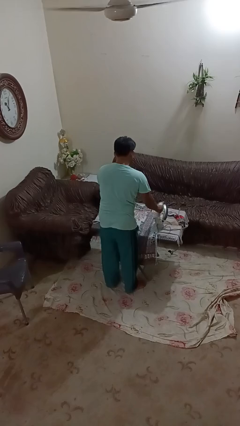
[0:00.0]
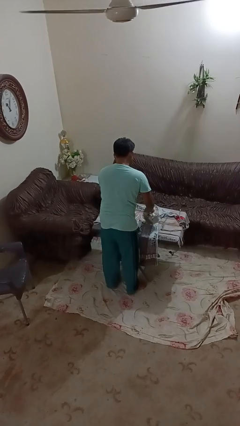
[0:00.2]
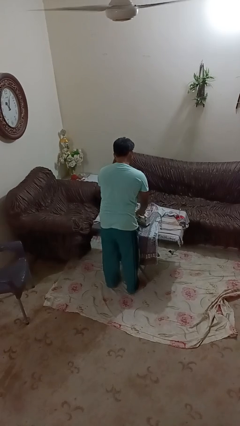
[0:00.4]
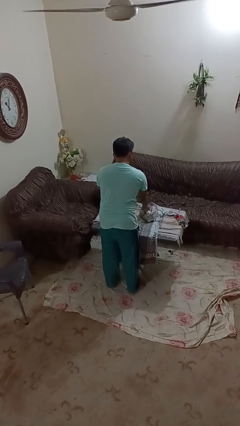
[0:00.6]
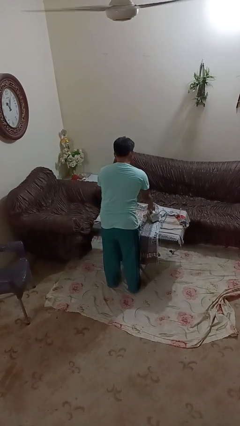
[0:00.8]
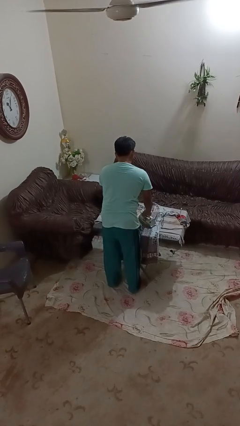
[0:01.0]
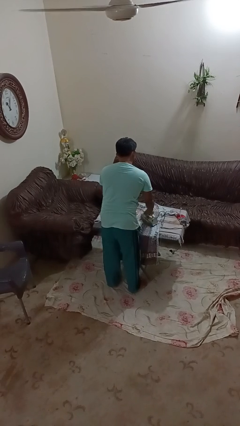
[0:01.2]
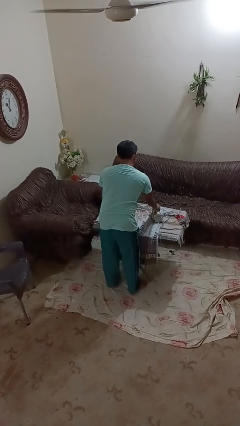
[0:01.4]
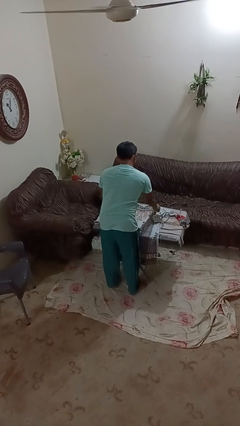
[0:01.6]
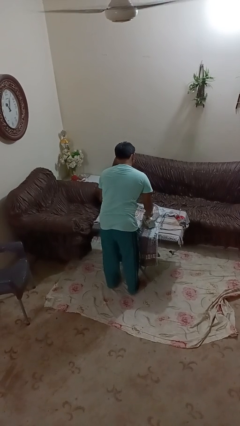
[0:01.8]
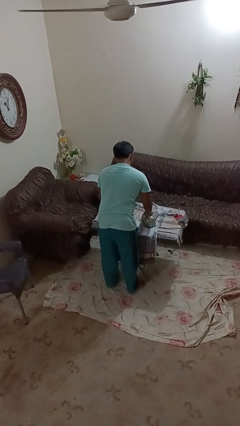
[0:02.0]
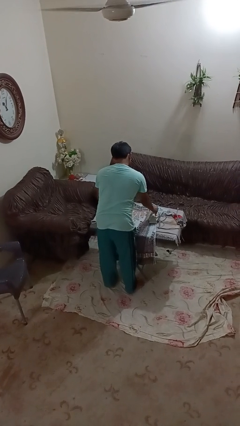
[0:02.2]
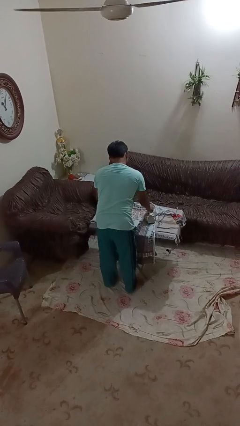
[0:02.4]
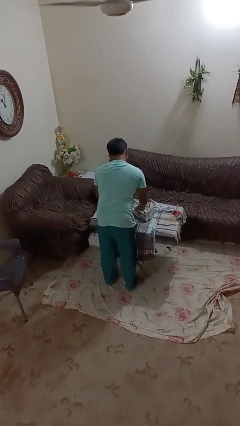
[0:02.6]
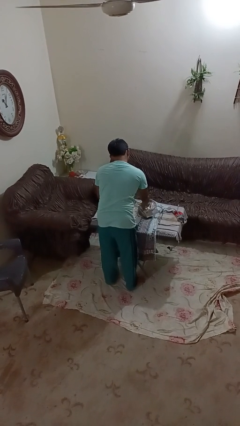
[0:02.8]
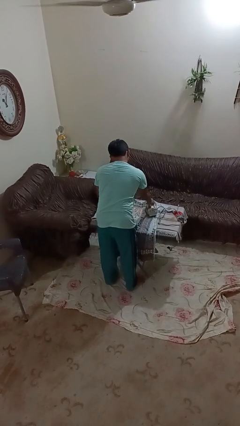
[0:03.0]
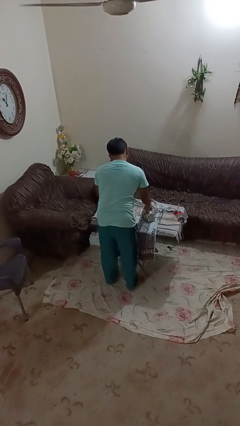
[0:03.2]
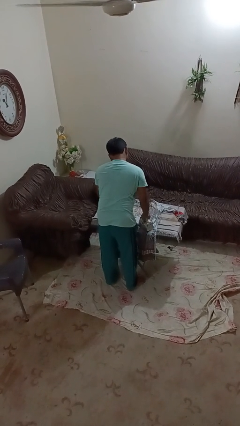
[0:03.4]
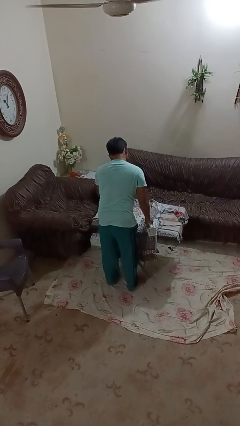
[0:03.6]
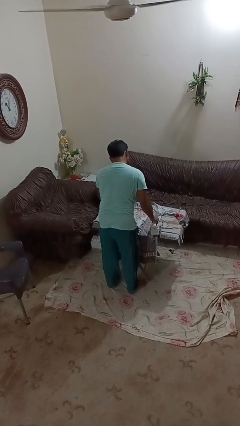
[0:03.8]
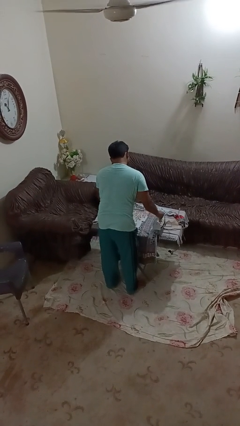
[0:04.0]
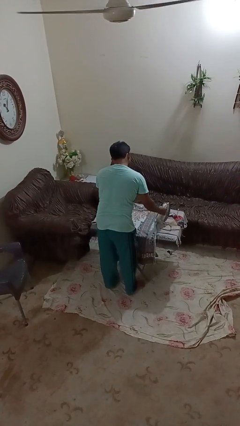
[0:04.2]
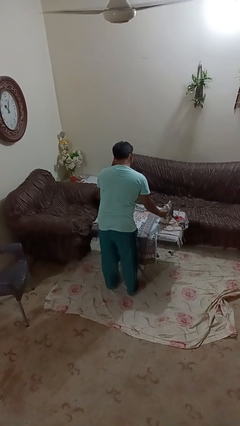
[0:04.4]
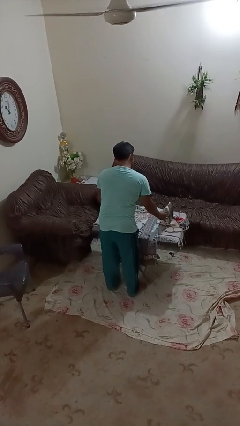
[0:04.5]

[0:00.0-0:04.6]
person irons clothes

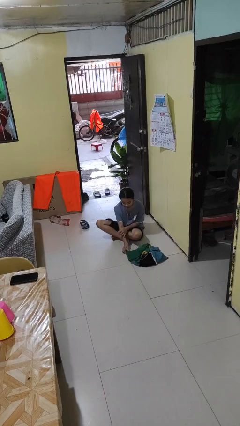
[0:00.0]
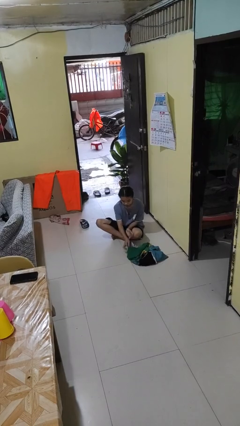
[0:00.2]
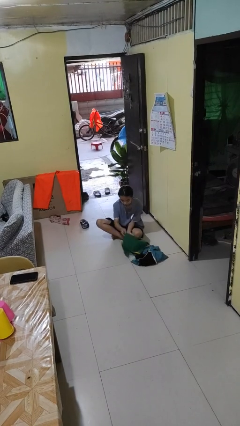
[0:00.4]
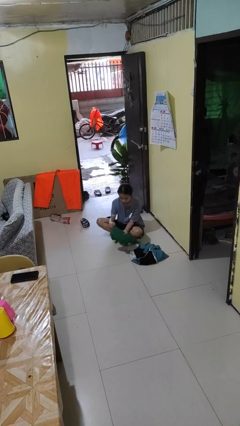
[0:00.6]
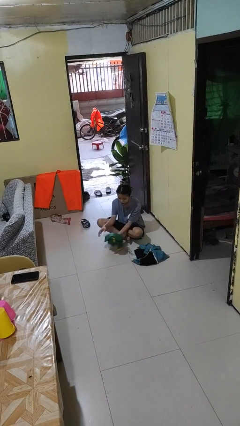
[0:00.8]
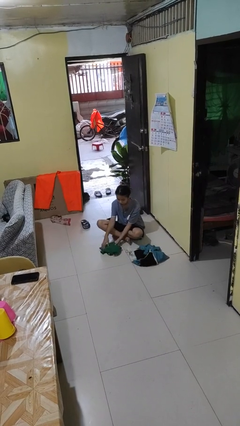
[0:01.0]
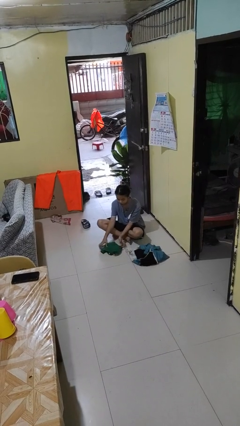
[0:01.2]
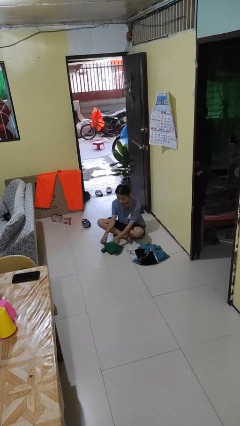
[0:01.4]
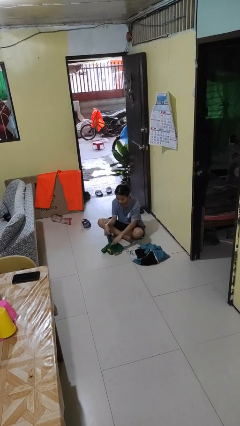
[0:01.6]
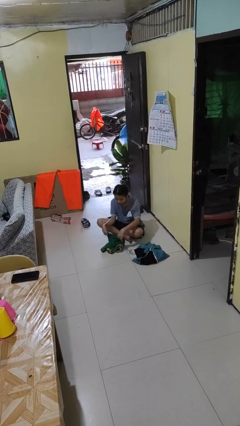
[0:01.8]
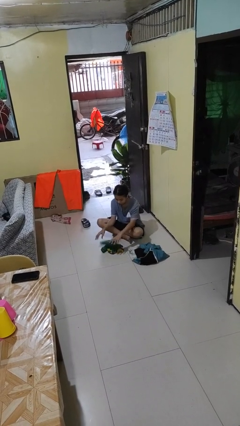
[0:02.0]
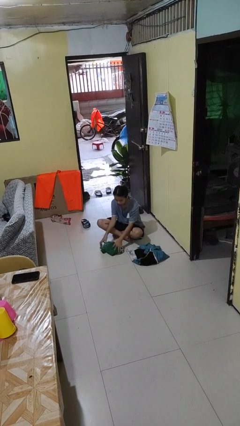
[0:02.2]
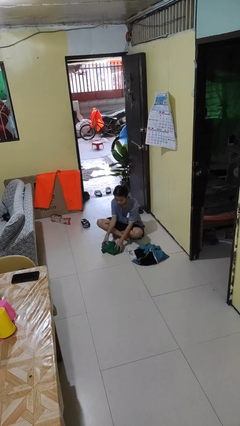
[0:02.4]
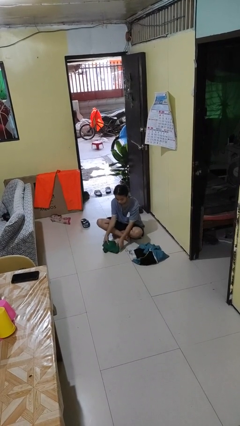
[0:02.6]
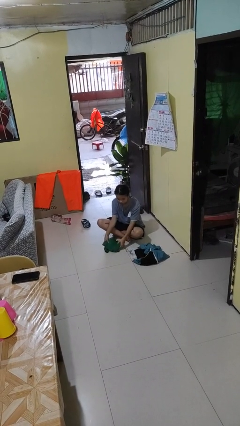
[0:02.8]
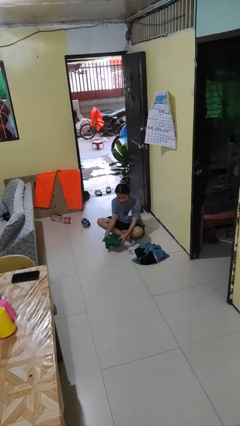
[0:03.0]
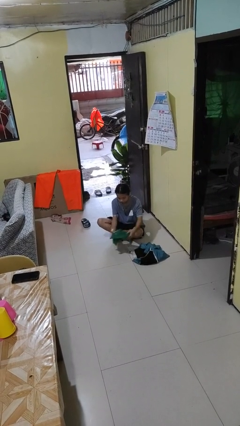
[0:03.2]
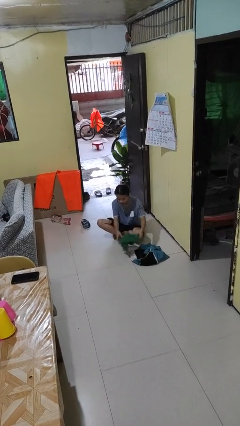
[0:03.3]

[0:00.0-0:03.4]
person folds shirt

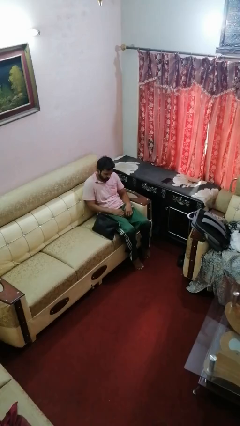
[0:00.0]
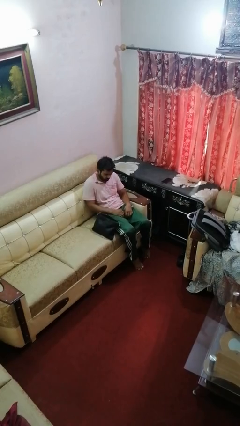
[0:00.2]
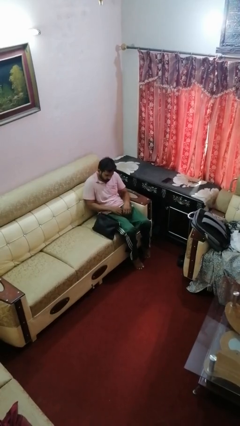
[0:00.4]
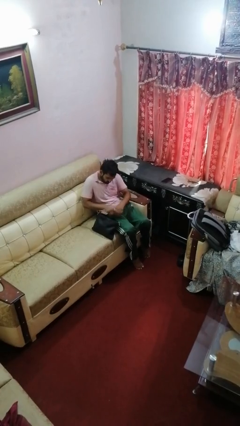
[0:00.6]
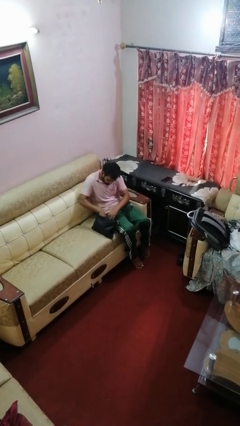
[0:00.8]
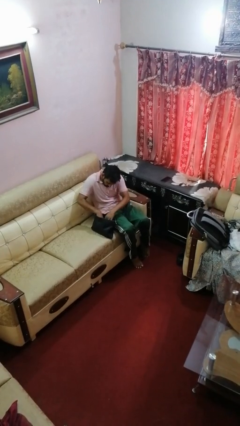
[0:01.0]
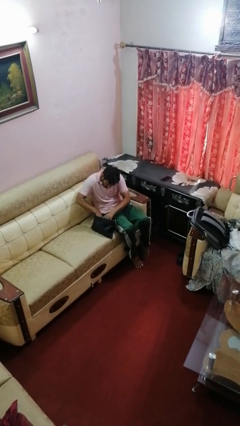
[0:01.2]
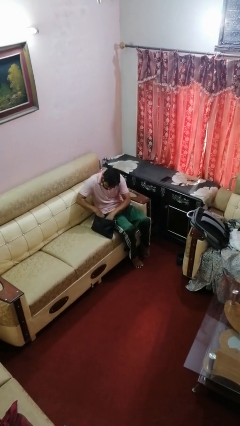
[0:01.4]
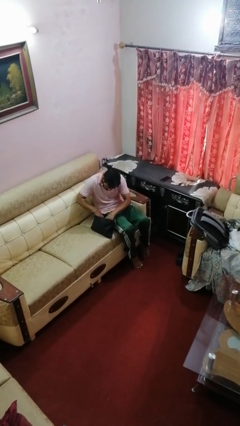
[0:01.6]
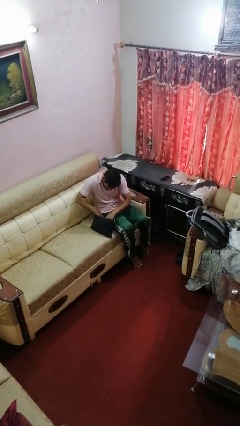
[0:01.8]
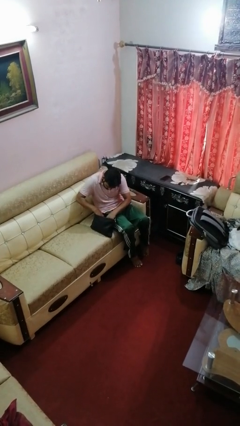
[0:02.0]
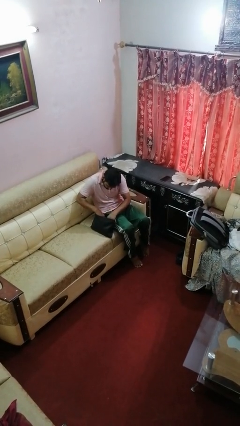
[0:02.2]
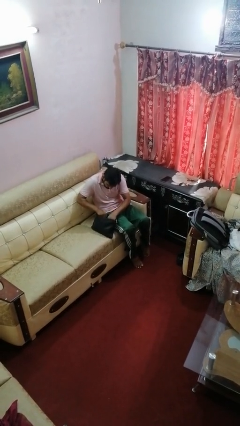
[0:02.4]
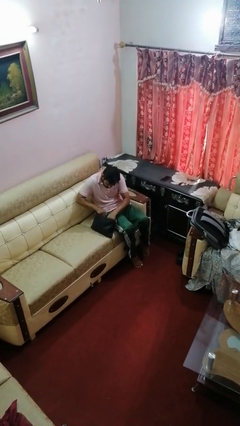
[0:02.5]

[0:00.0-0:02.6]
person searches in purse

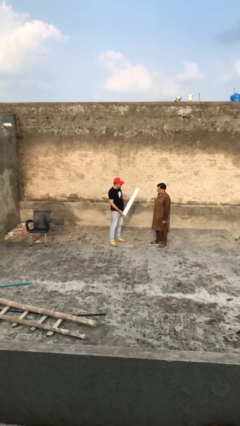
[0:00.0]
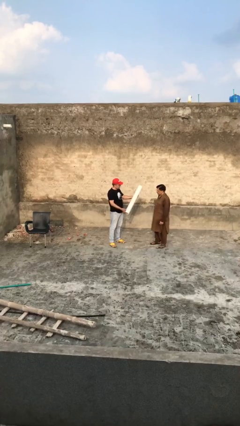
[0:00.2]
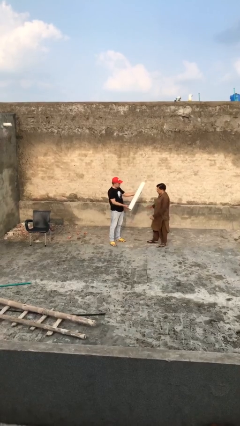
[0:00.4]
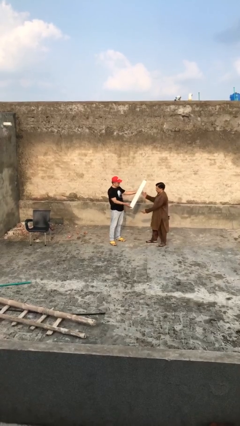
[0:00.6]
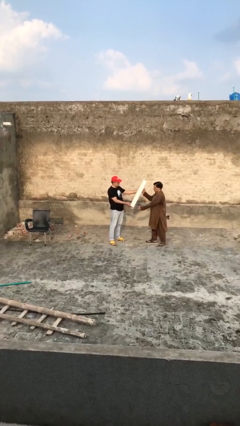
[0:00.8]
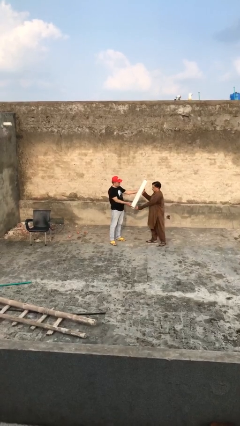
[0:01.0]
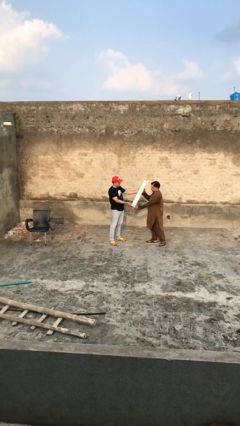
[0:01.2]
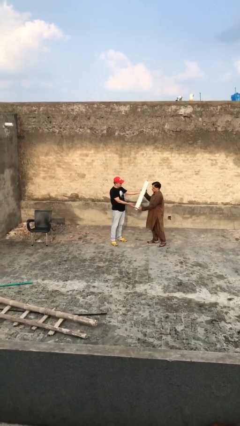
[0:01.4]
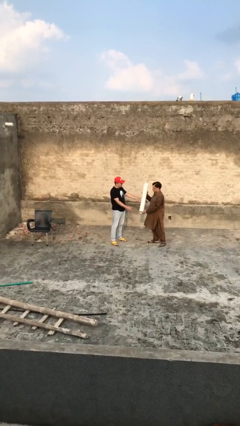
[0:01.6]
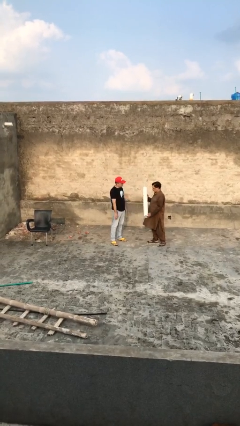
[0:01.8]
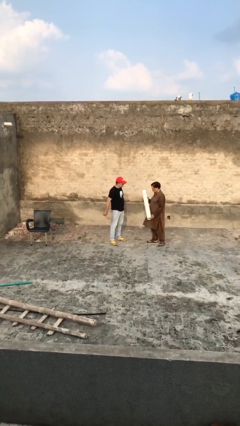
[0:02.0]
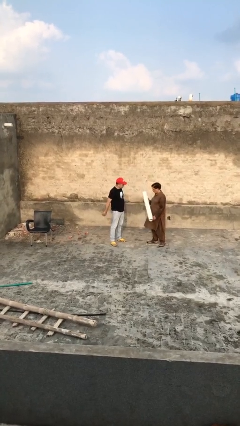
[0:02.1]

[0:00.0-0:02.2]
person transfers object to person

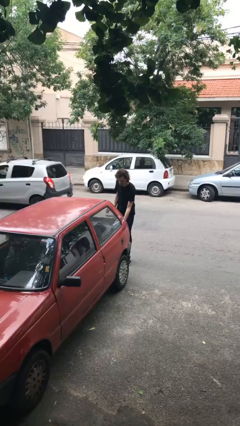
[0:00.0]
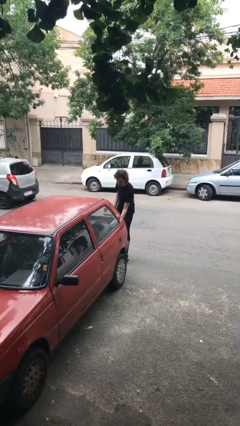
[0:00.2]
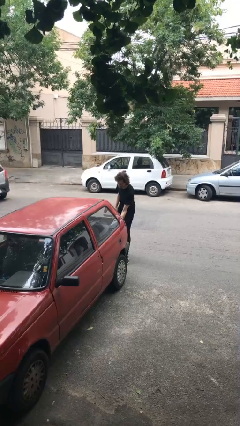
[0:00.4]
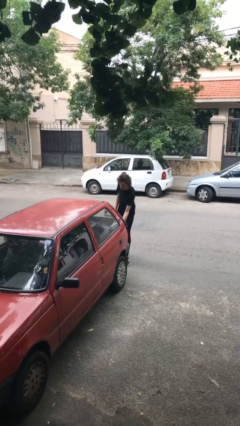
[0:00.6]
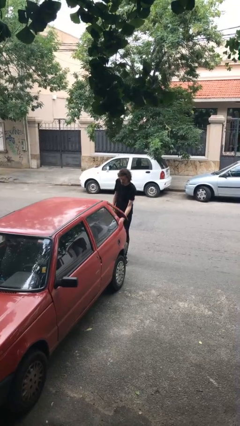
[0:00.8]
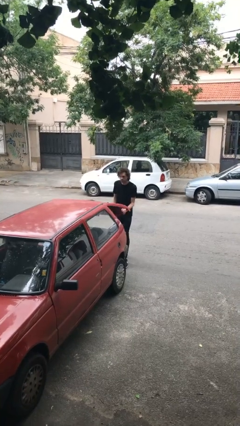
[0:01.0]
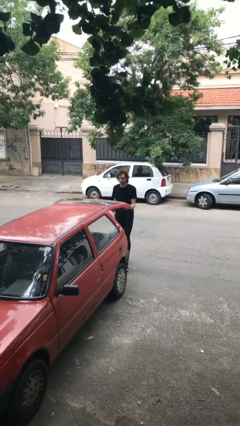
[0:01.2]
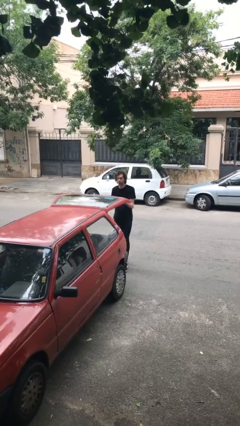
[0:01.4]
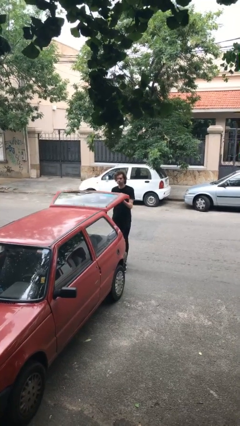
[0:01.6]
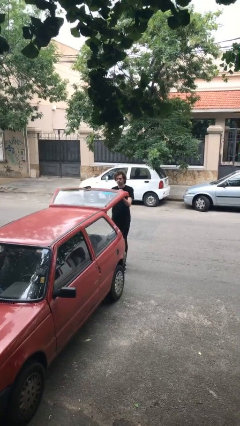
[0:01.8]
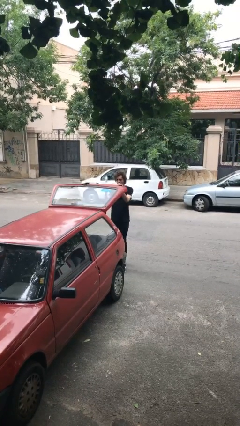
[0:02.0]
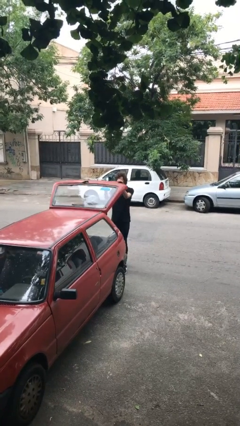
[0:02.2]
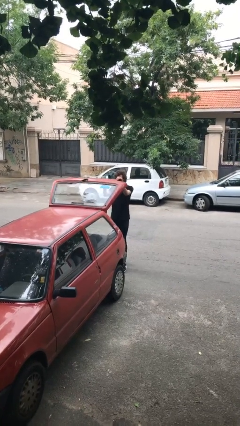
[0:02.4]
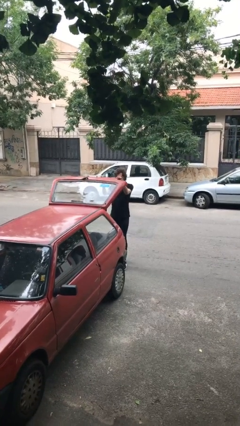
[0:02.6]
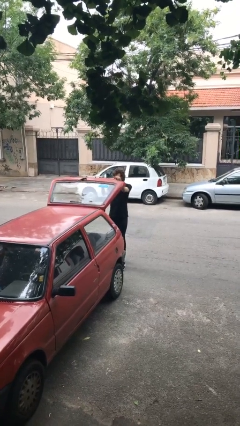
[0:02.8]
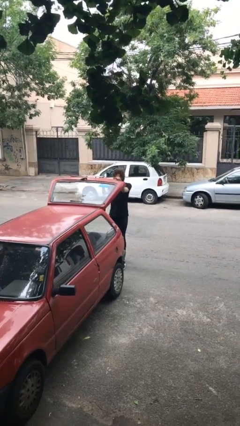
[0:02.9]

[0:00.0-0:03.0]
person opens car trunk

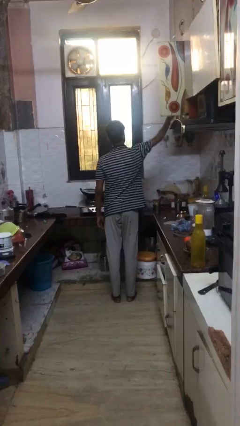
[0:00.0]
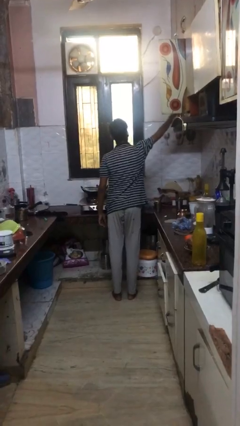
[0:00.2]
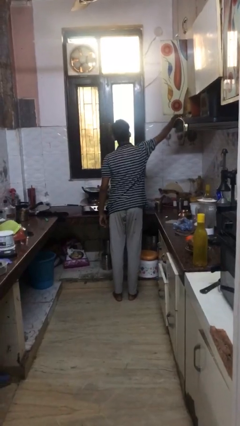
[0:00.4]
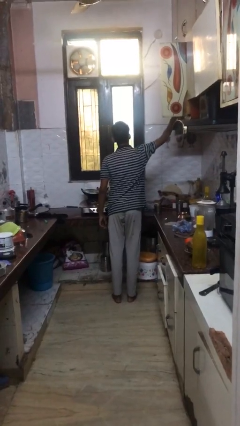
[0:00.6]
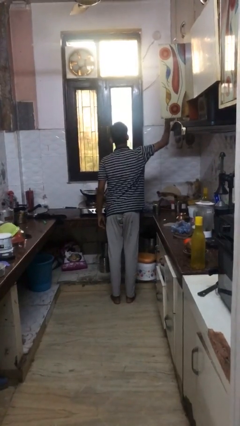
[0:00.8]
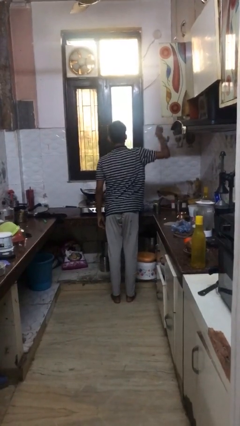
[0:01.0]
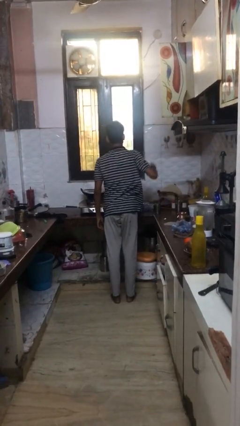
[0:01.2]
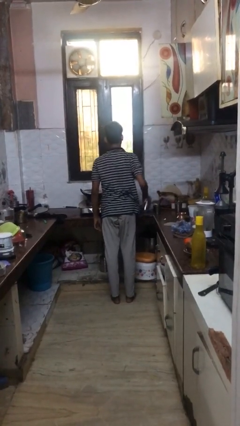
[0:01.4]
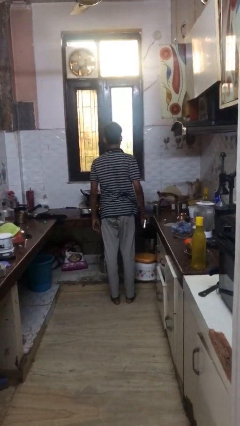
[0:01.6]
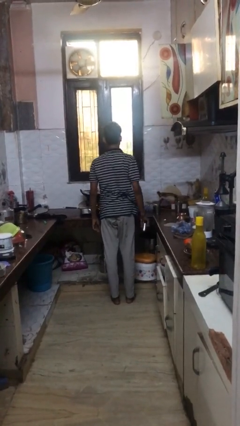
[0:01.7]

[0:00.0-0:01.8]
person puts object in cabinet
